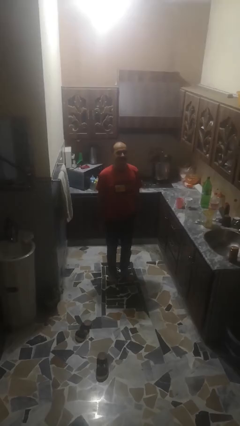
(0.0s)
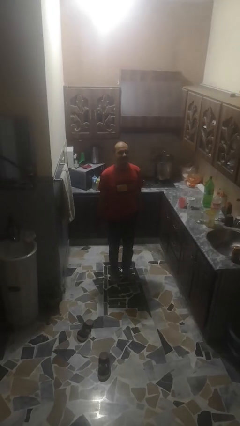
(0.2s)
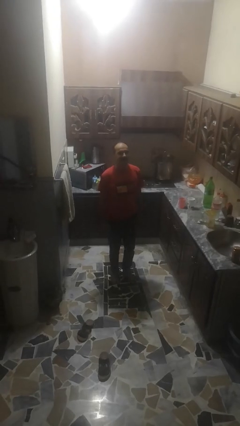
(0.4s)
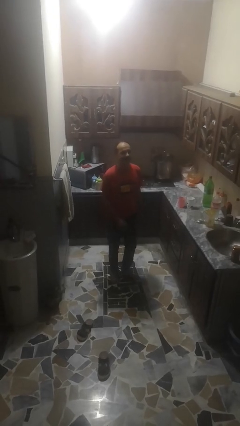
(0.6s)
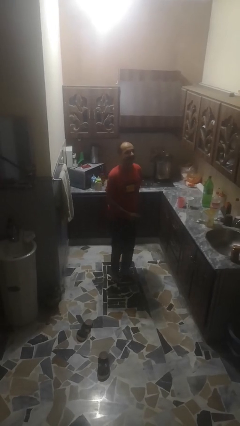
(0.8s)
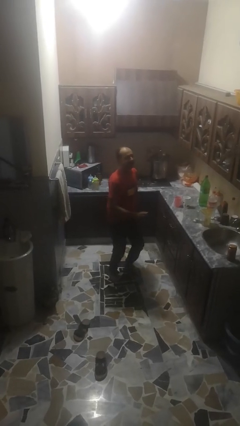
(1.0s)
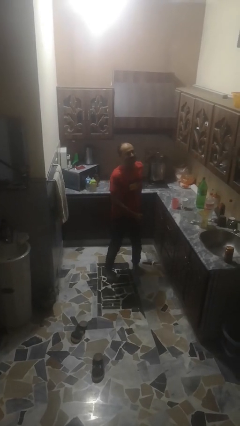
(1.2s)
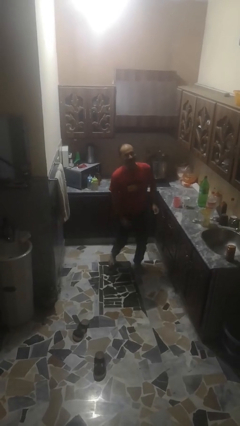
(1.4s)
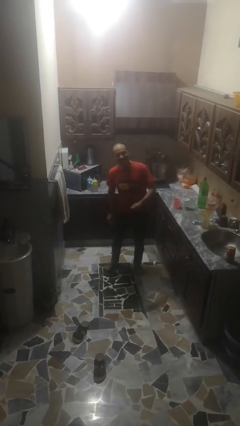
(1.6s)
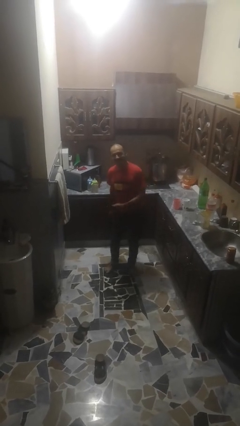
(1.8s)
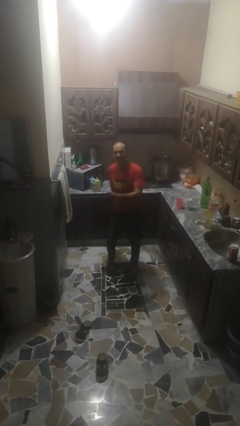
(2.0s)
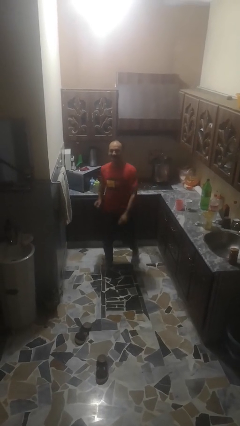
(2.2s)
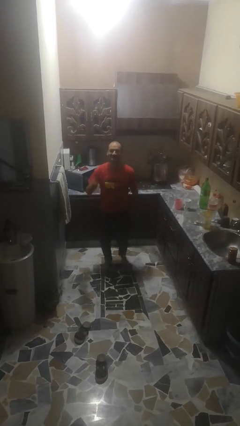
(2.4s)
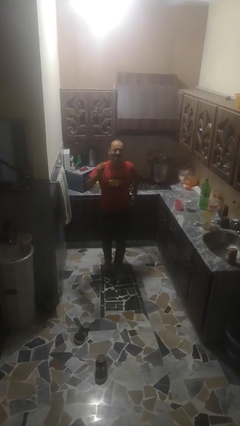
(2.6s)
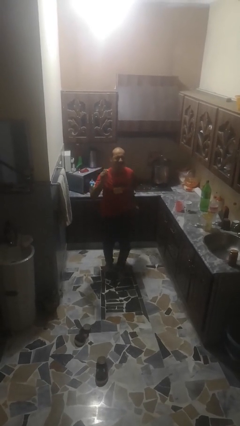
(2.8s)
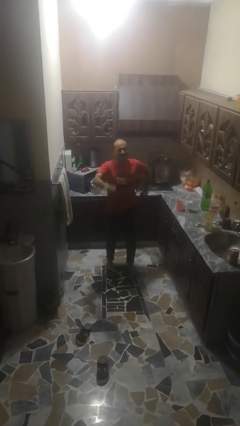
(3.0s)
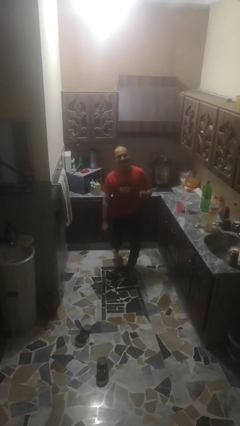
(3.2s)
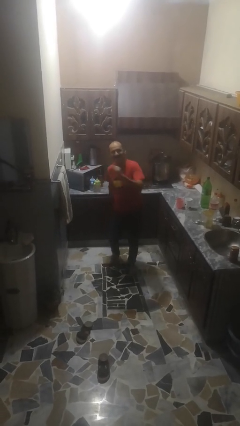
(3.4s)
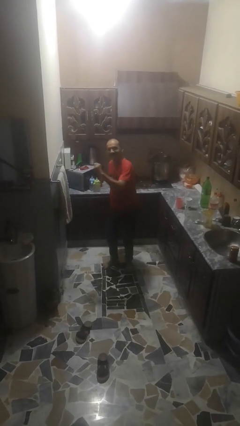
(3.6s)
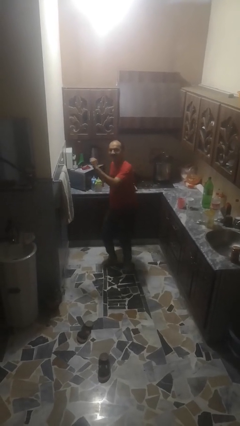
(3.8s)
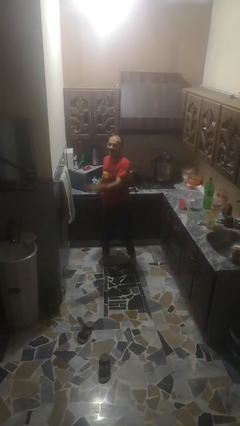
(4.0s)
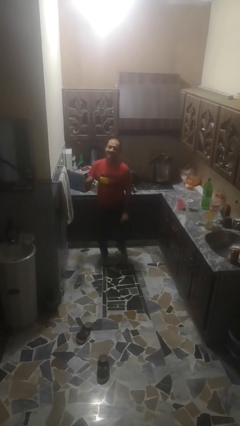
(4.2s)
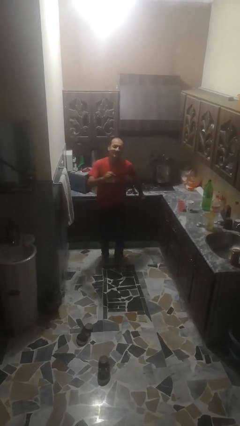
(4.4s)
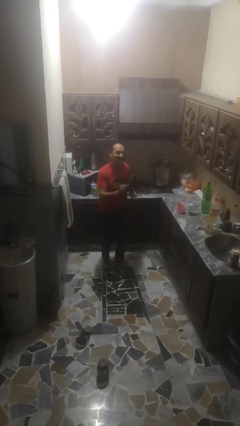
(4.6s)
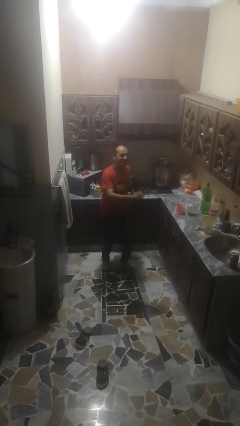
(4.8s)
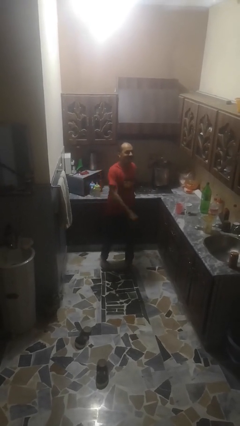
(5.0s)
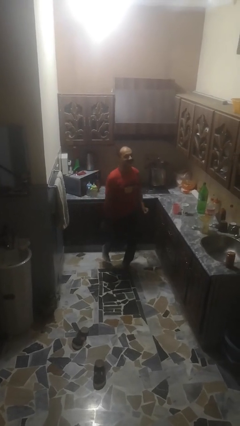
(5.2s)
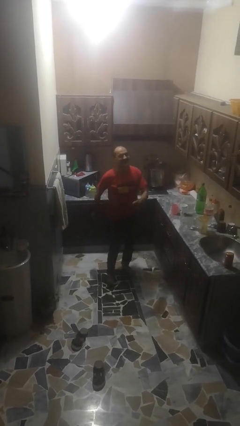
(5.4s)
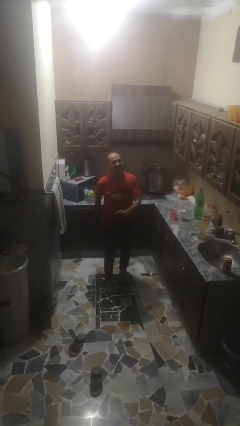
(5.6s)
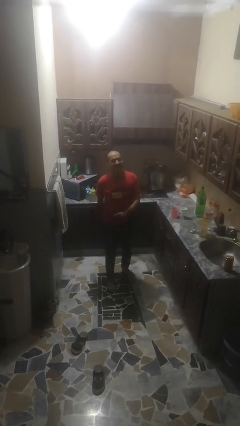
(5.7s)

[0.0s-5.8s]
person dances in place

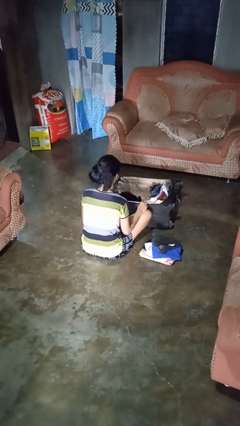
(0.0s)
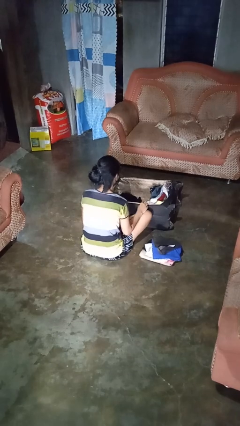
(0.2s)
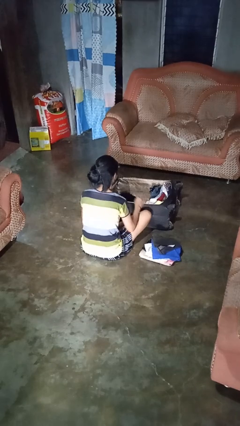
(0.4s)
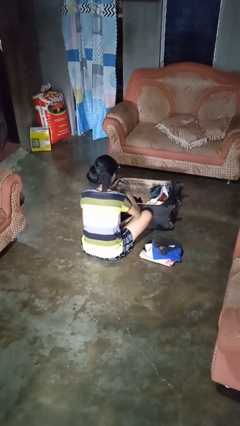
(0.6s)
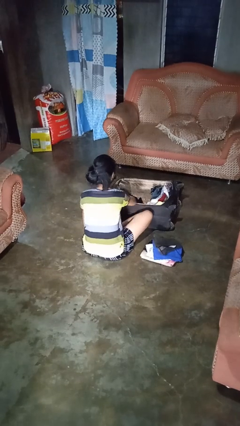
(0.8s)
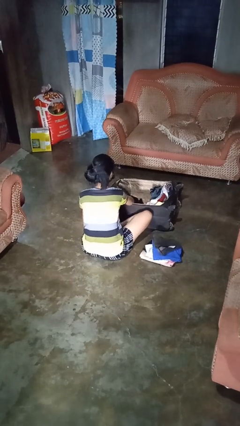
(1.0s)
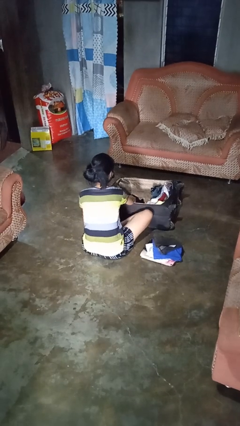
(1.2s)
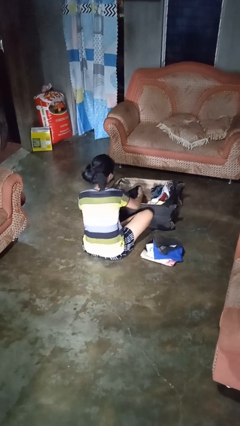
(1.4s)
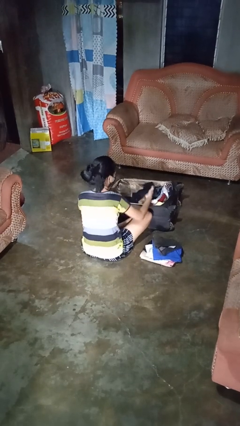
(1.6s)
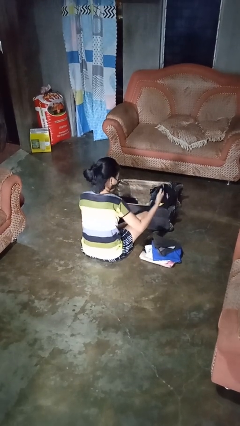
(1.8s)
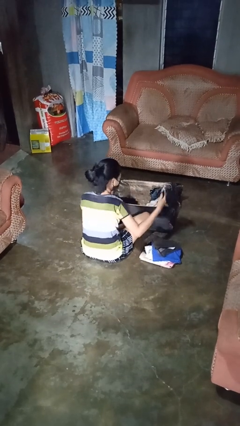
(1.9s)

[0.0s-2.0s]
person unloads clothes from suitcase

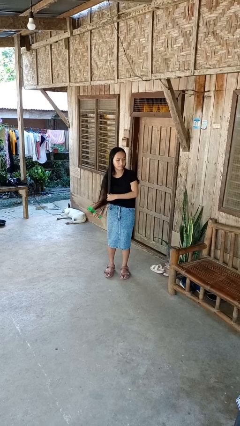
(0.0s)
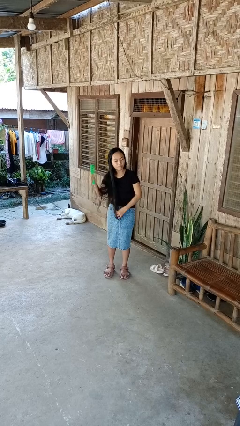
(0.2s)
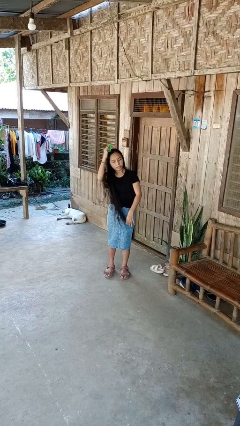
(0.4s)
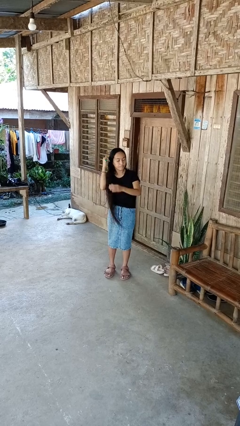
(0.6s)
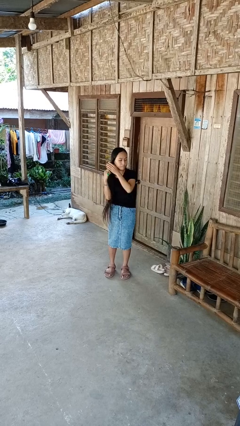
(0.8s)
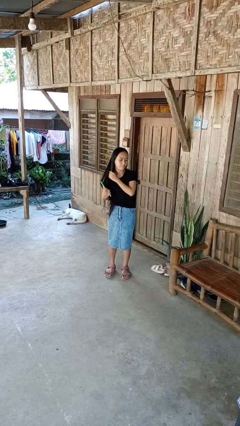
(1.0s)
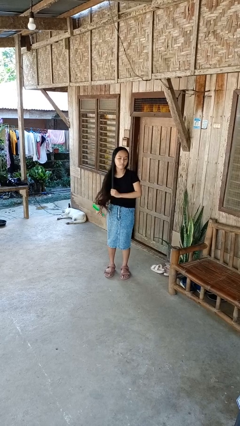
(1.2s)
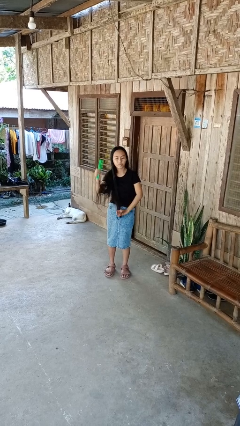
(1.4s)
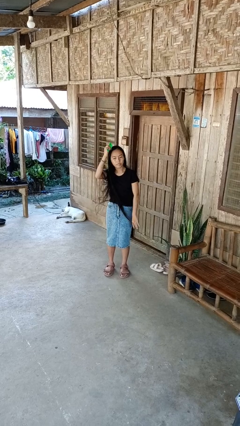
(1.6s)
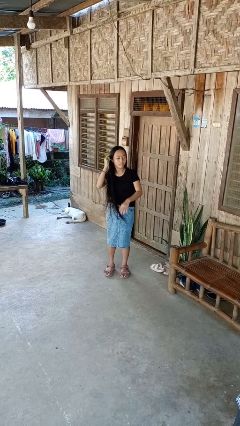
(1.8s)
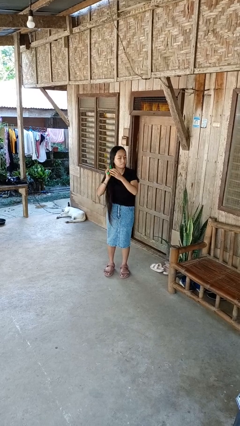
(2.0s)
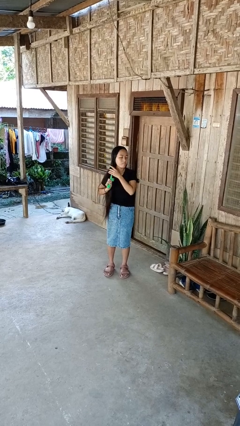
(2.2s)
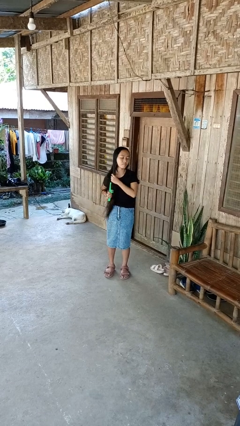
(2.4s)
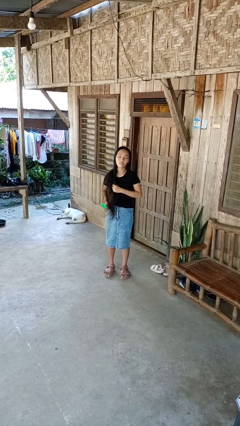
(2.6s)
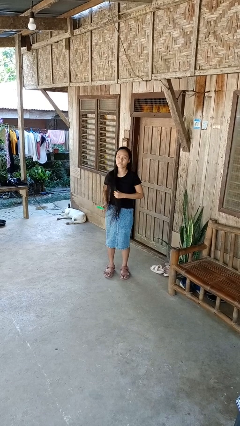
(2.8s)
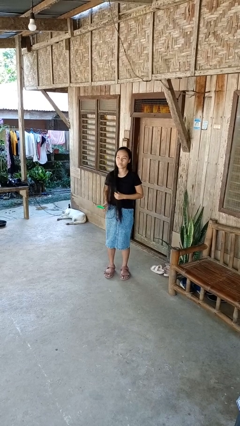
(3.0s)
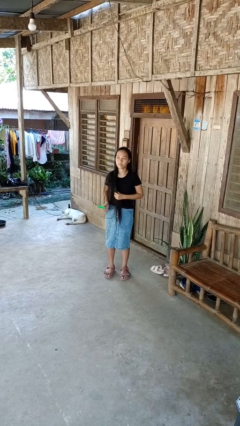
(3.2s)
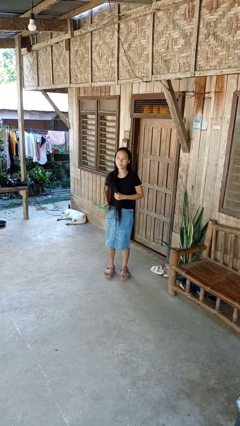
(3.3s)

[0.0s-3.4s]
person brushes hair

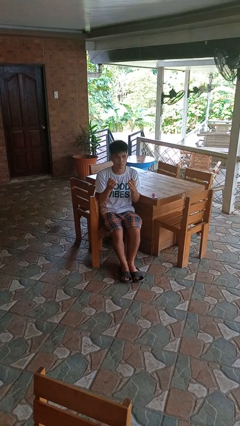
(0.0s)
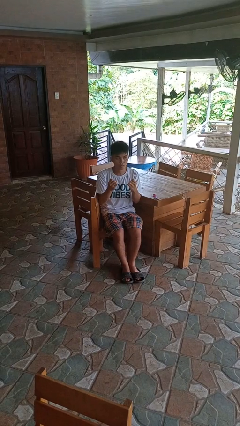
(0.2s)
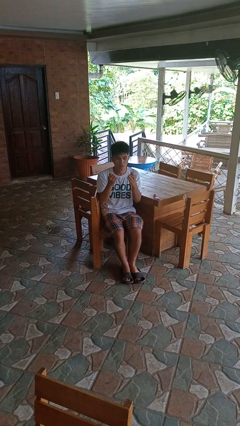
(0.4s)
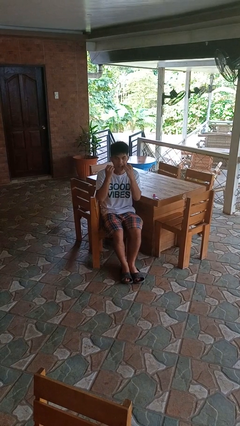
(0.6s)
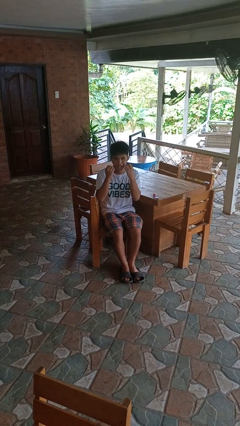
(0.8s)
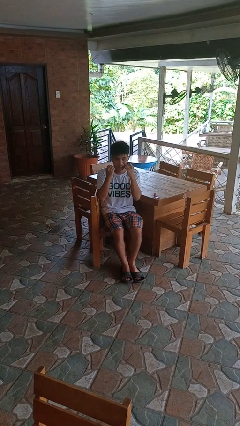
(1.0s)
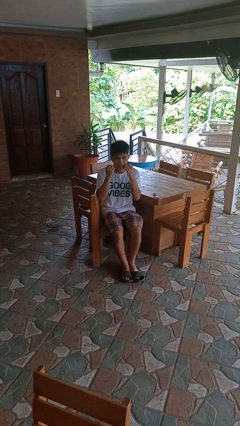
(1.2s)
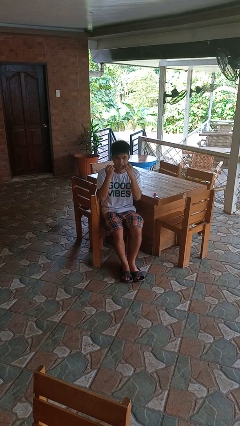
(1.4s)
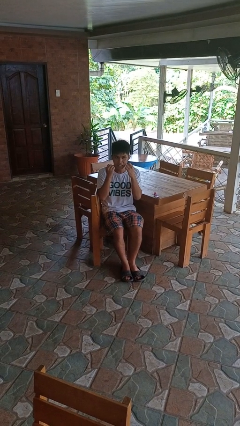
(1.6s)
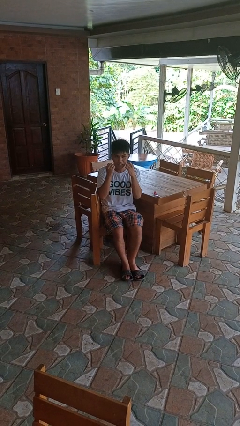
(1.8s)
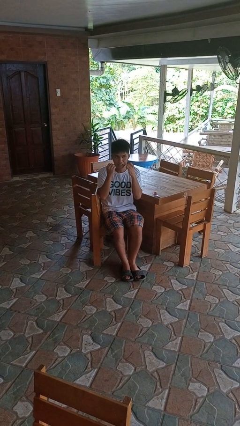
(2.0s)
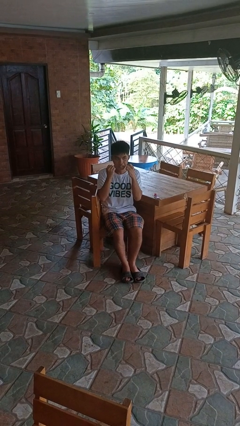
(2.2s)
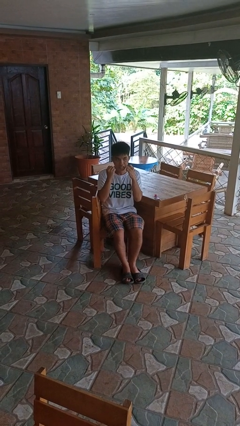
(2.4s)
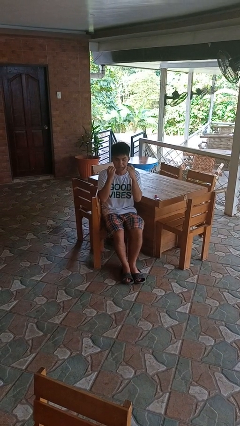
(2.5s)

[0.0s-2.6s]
person flosses

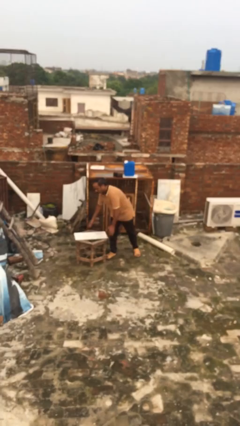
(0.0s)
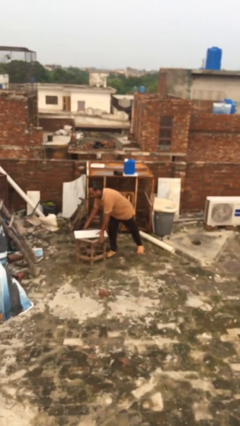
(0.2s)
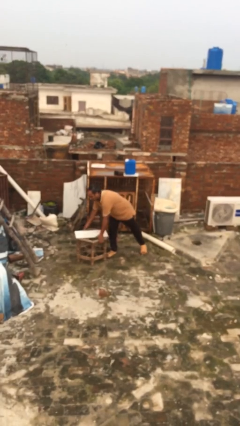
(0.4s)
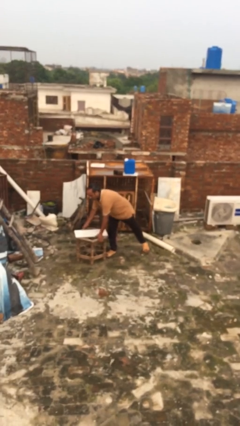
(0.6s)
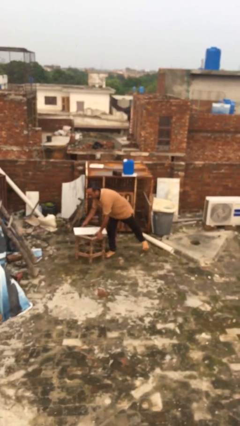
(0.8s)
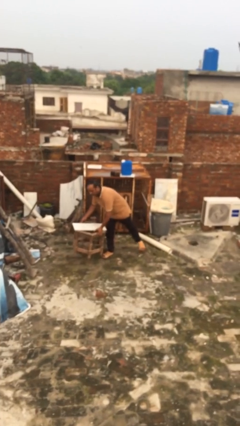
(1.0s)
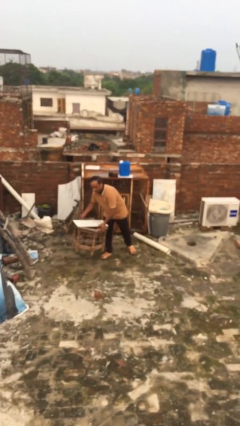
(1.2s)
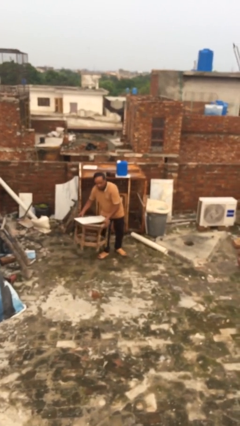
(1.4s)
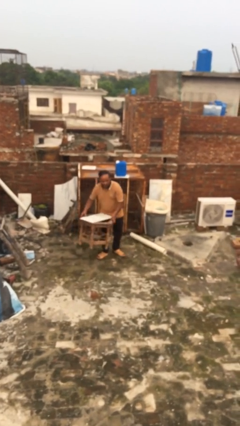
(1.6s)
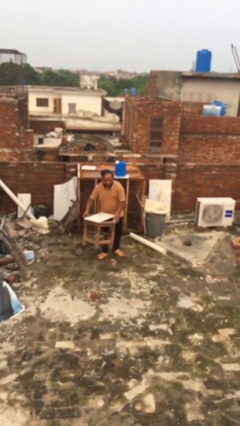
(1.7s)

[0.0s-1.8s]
person picks up object from floor

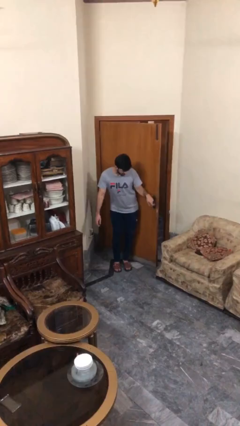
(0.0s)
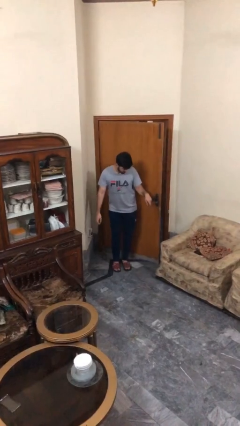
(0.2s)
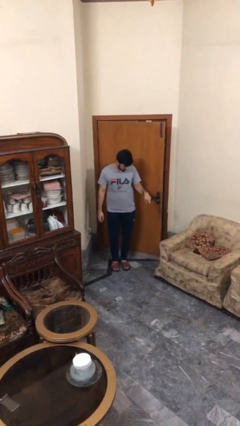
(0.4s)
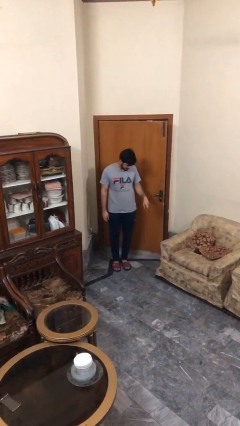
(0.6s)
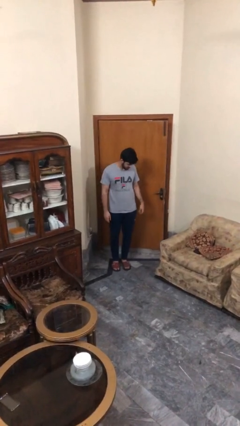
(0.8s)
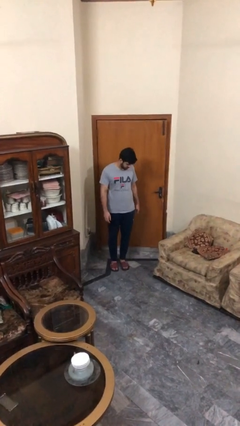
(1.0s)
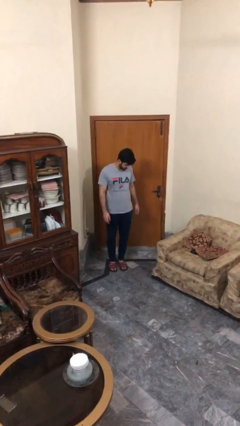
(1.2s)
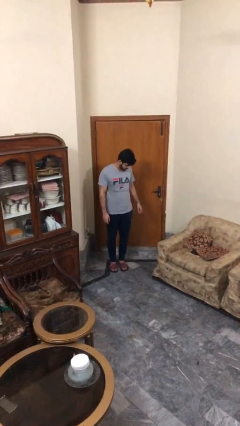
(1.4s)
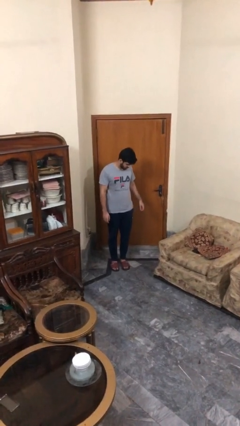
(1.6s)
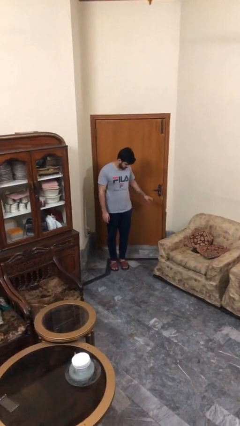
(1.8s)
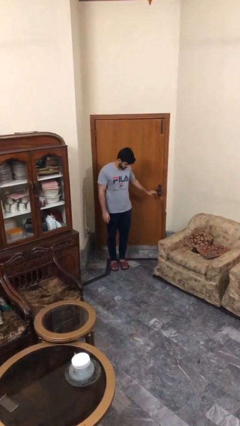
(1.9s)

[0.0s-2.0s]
person closes door with hip
